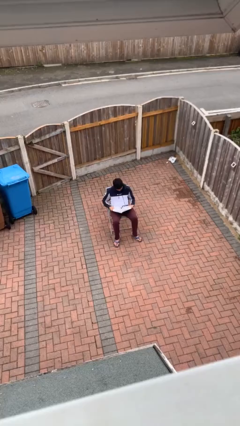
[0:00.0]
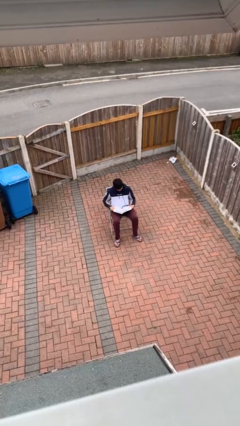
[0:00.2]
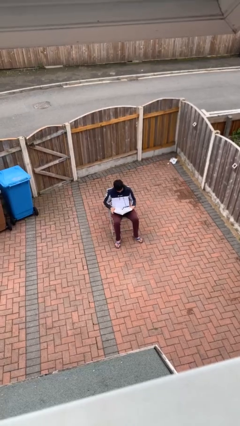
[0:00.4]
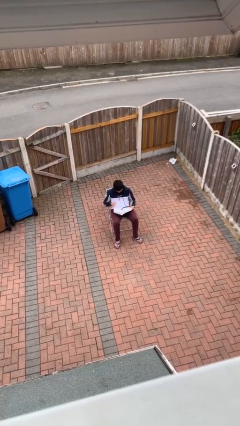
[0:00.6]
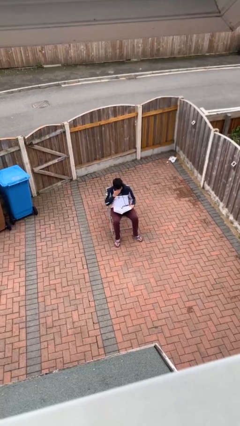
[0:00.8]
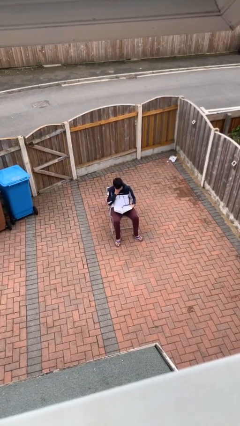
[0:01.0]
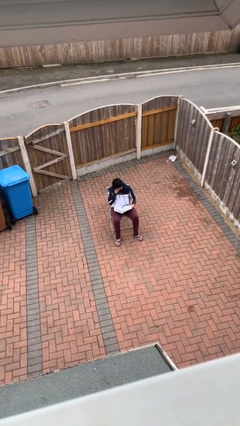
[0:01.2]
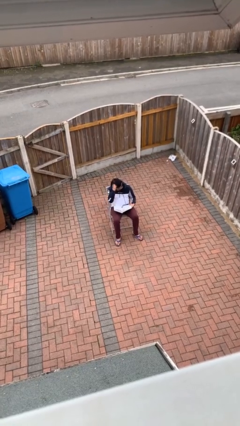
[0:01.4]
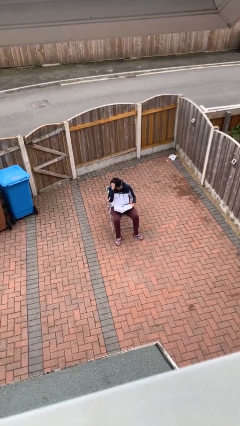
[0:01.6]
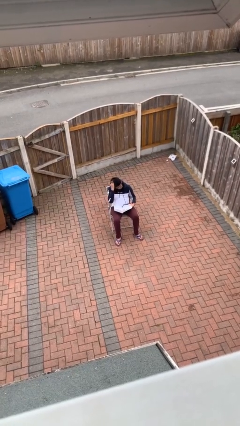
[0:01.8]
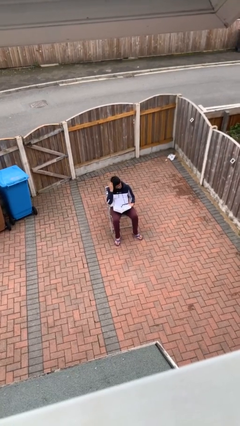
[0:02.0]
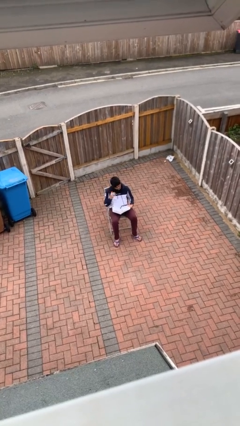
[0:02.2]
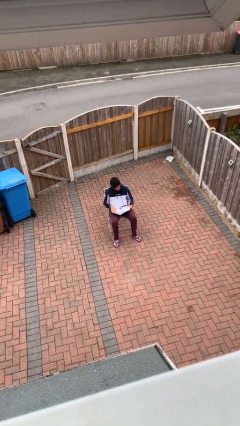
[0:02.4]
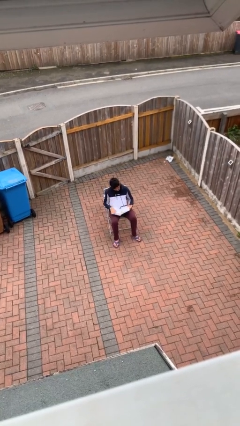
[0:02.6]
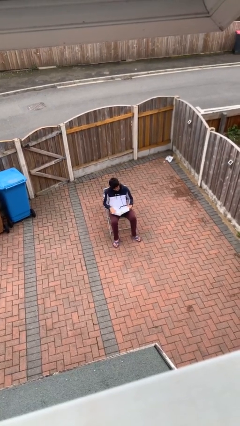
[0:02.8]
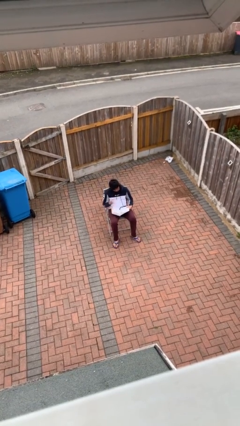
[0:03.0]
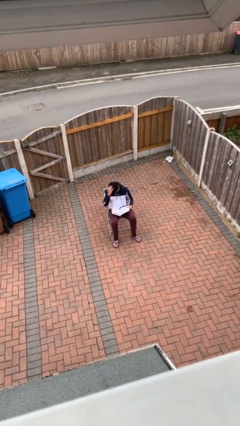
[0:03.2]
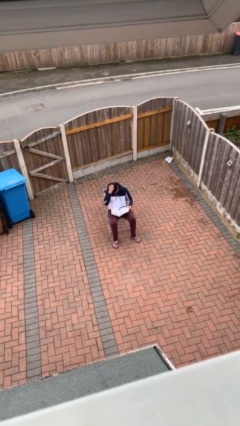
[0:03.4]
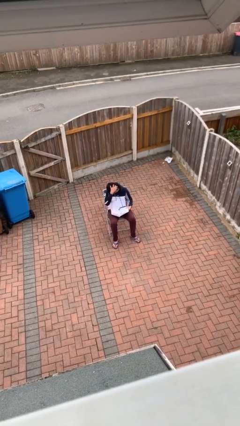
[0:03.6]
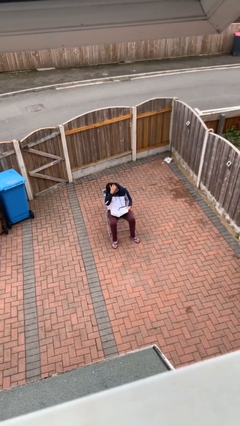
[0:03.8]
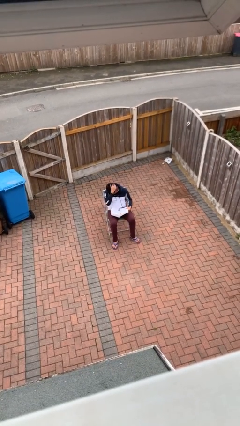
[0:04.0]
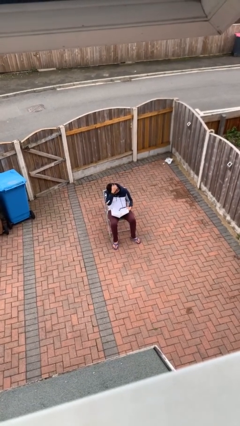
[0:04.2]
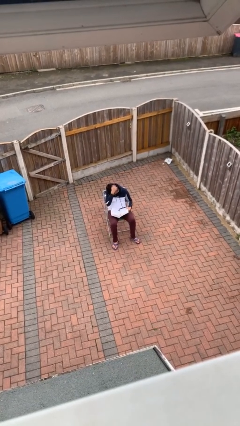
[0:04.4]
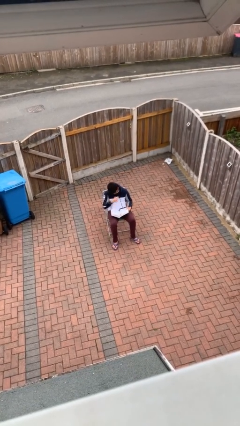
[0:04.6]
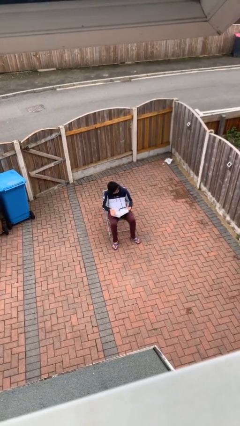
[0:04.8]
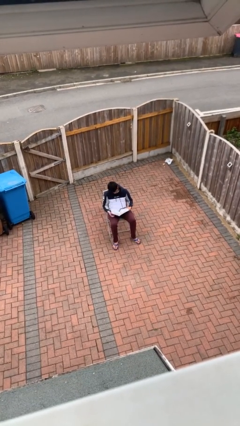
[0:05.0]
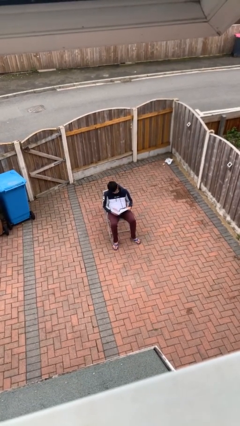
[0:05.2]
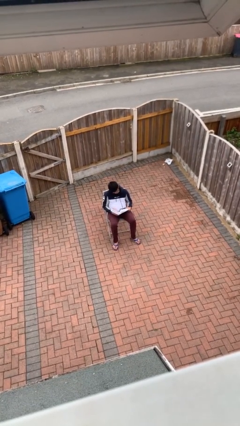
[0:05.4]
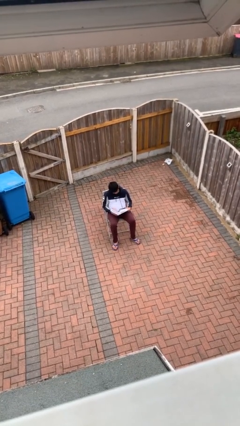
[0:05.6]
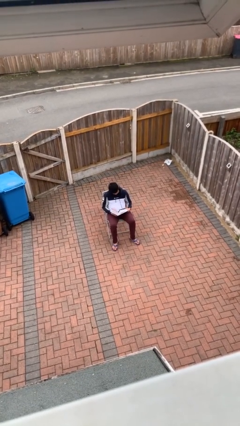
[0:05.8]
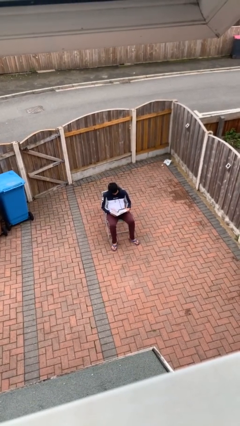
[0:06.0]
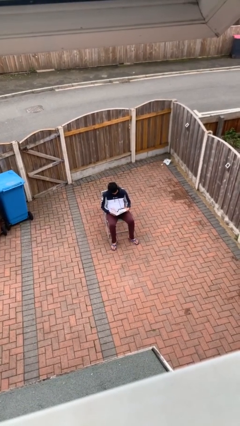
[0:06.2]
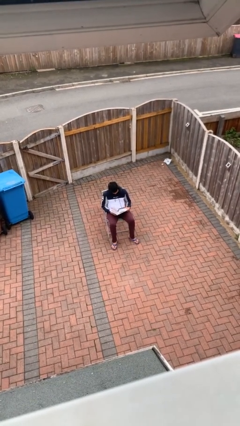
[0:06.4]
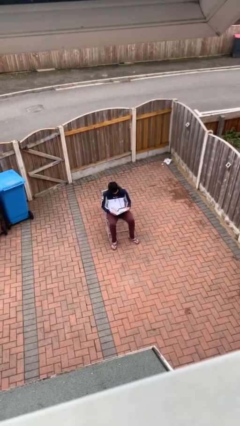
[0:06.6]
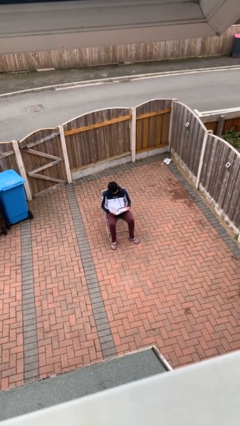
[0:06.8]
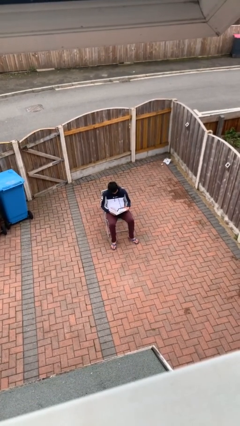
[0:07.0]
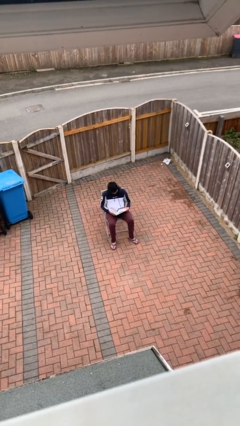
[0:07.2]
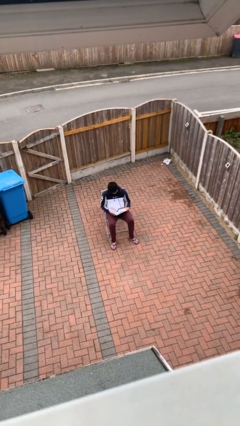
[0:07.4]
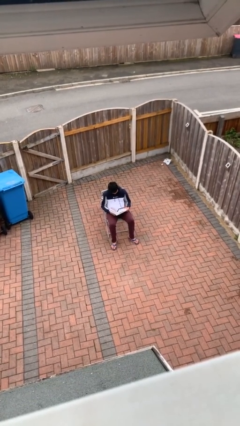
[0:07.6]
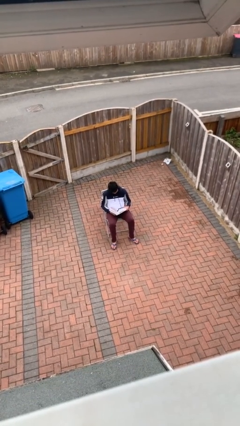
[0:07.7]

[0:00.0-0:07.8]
person reads document

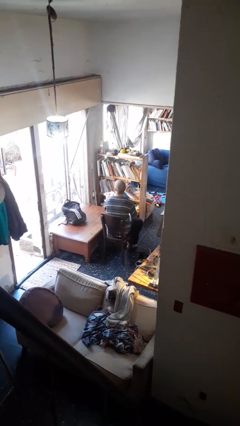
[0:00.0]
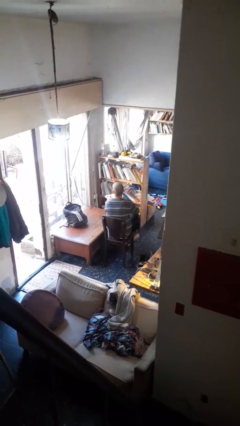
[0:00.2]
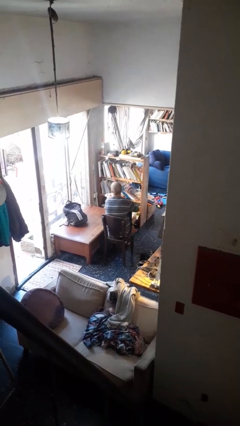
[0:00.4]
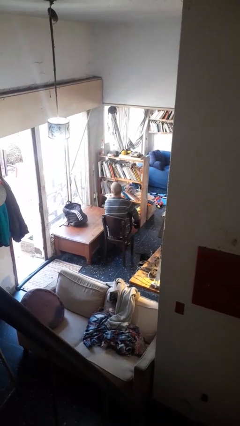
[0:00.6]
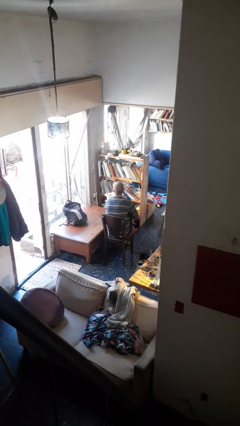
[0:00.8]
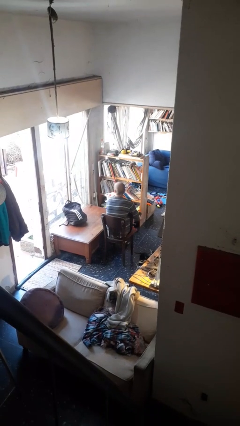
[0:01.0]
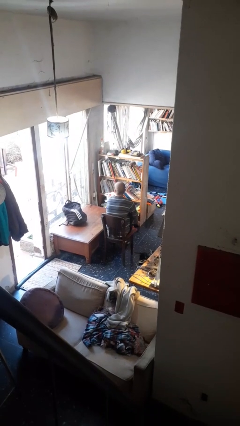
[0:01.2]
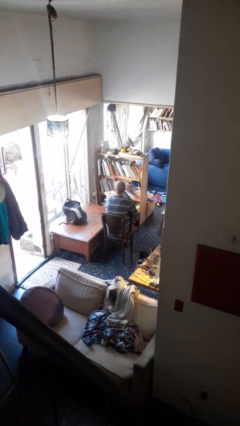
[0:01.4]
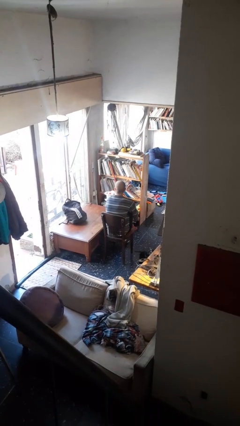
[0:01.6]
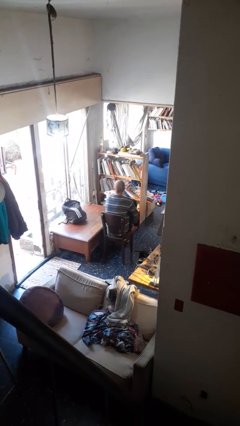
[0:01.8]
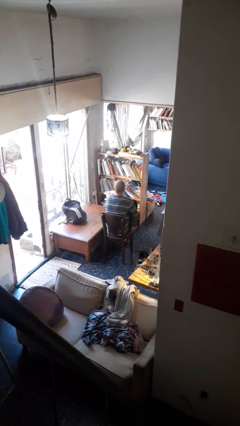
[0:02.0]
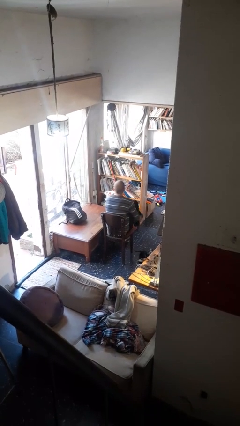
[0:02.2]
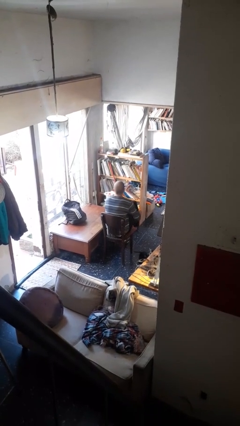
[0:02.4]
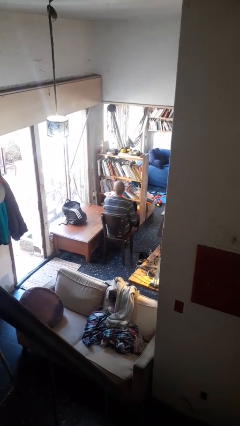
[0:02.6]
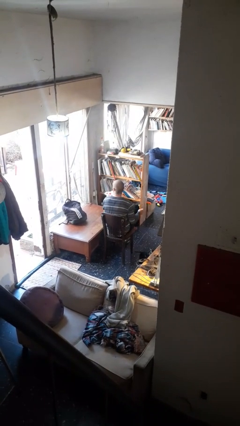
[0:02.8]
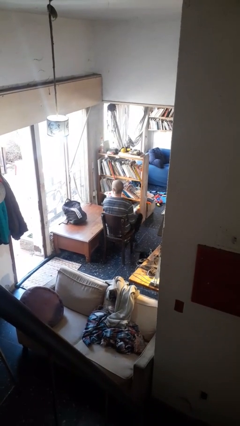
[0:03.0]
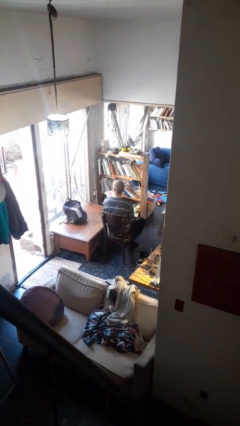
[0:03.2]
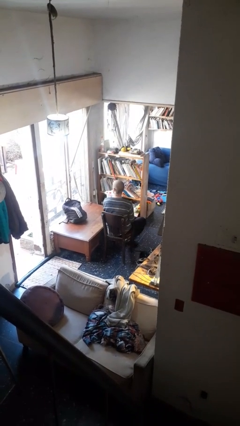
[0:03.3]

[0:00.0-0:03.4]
person puts on socks

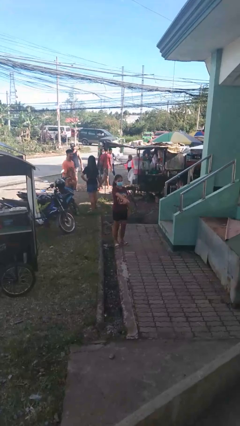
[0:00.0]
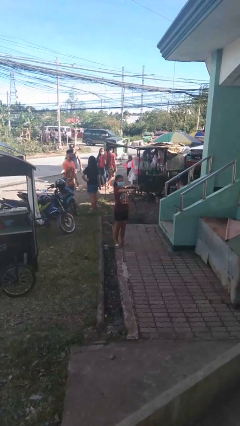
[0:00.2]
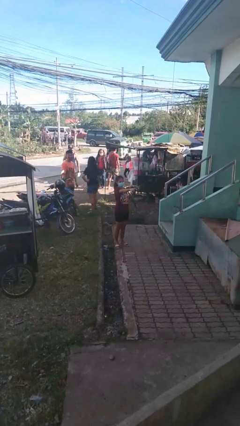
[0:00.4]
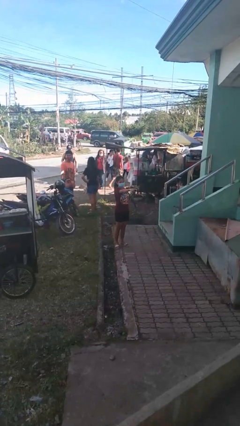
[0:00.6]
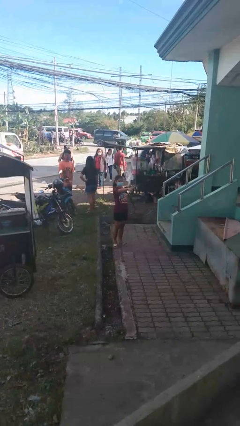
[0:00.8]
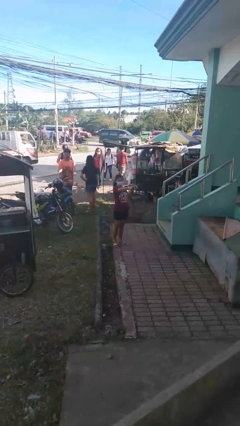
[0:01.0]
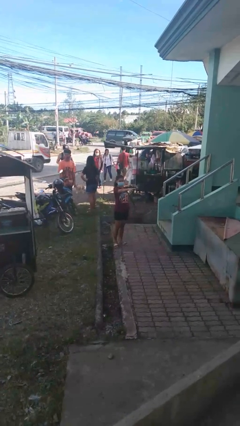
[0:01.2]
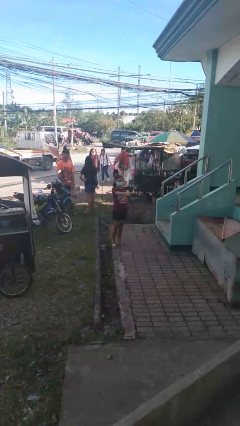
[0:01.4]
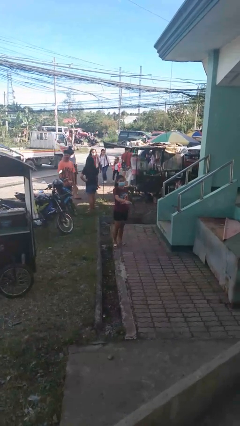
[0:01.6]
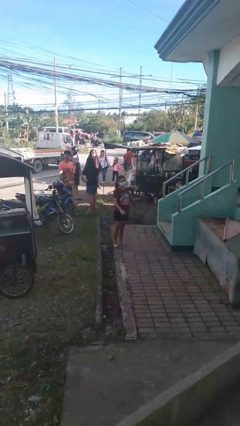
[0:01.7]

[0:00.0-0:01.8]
person points at person

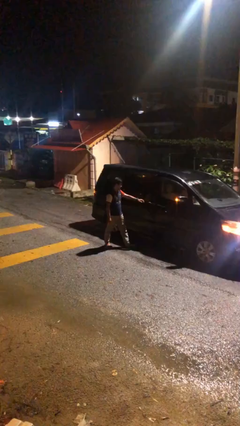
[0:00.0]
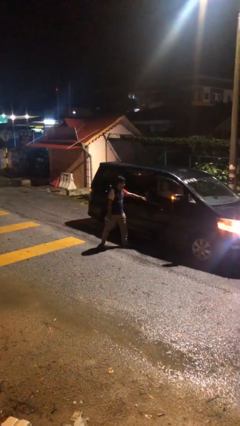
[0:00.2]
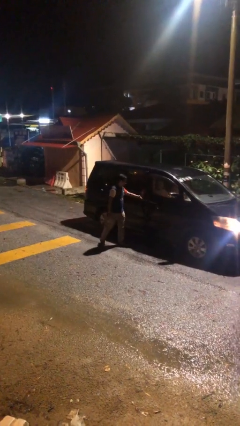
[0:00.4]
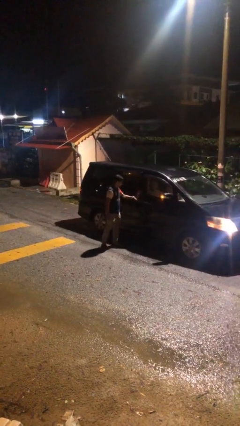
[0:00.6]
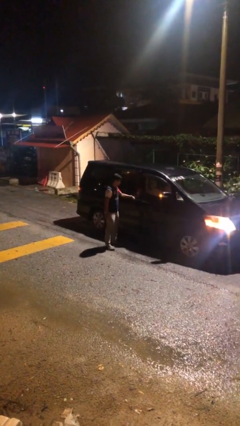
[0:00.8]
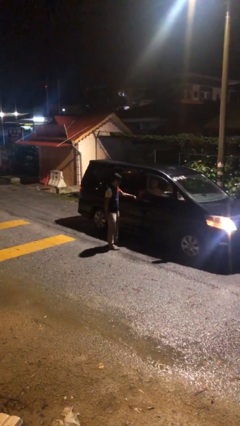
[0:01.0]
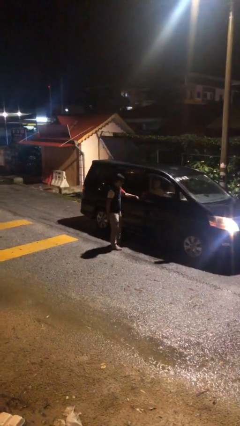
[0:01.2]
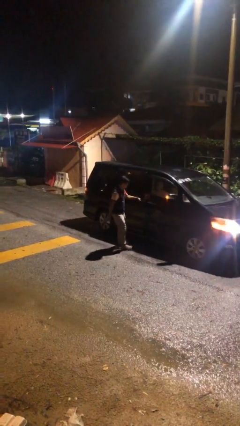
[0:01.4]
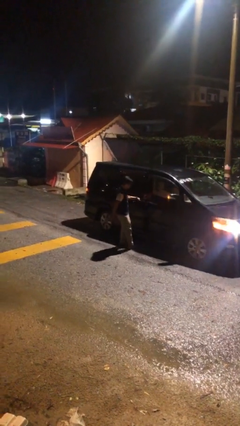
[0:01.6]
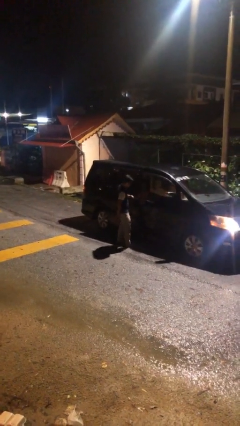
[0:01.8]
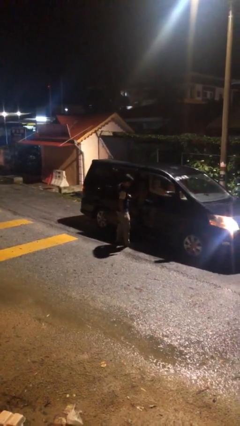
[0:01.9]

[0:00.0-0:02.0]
person opens car door

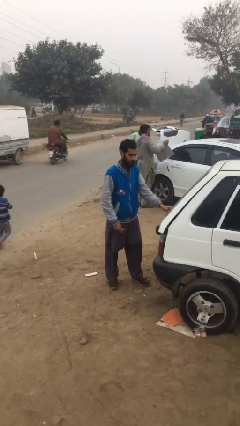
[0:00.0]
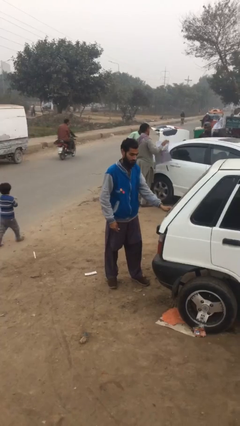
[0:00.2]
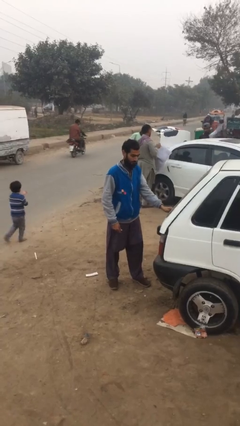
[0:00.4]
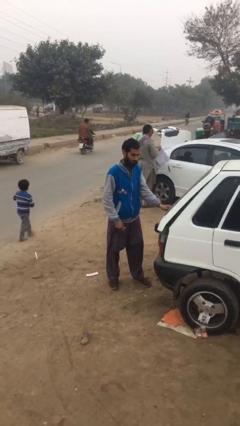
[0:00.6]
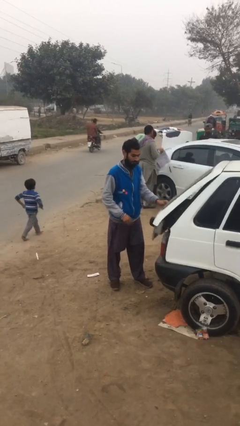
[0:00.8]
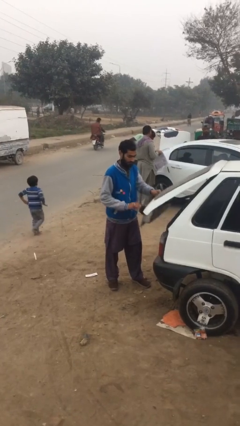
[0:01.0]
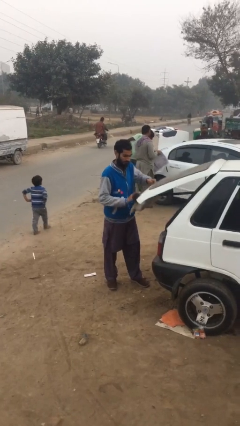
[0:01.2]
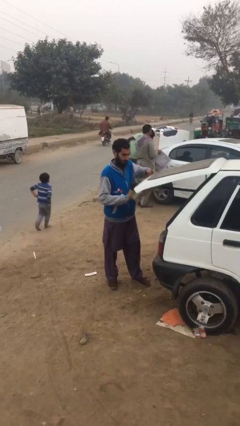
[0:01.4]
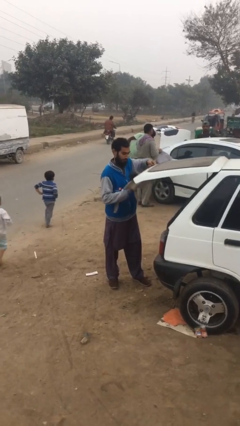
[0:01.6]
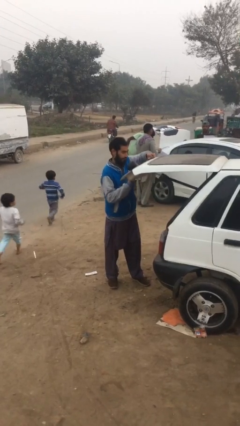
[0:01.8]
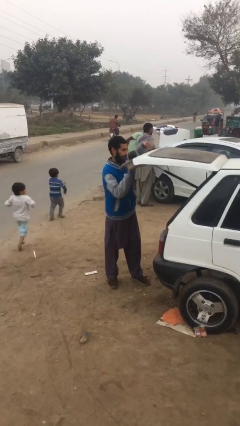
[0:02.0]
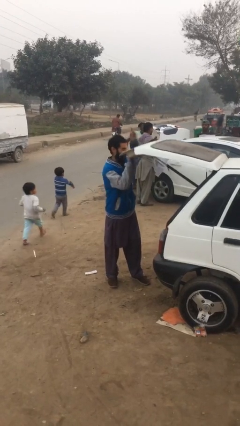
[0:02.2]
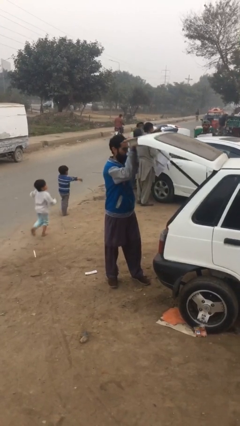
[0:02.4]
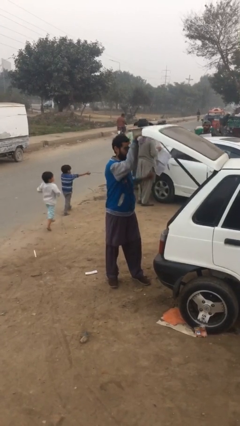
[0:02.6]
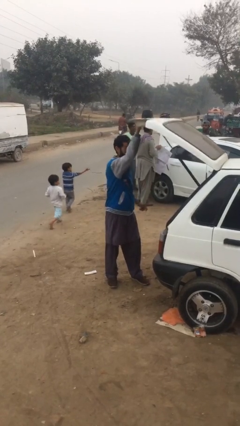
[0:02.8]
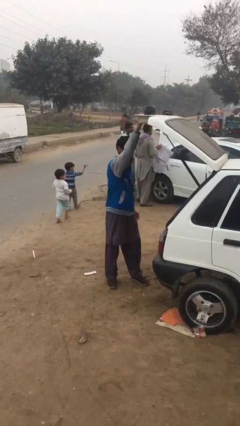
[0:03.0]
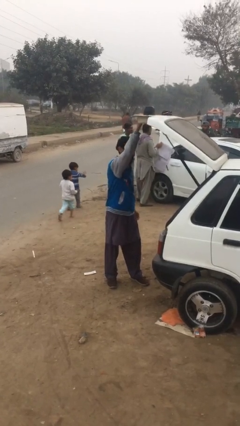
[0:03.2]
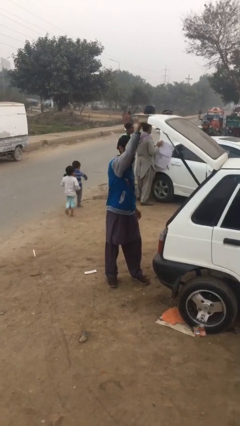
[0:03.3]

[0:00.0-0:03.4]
person opens car trunk
